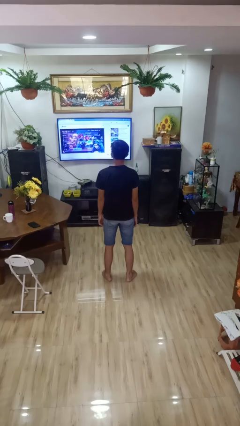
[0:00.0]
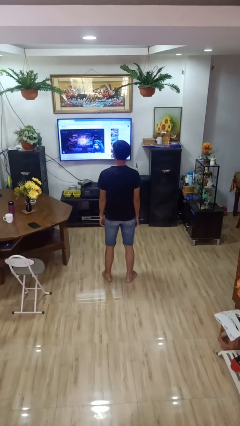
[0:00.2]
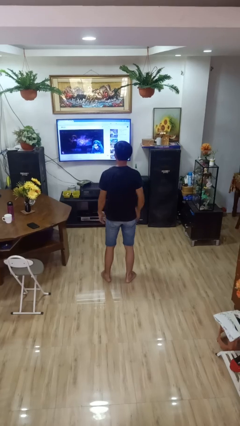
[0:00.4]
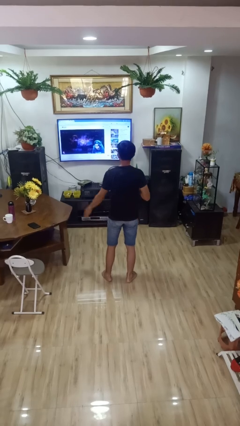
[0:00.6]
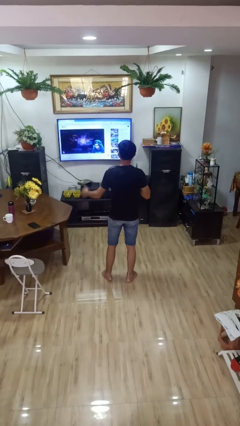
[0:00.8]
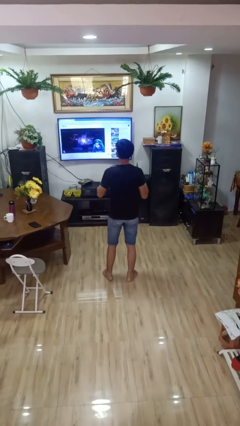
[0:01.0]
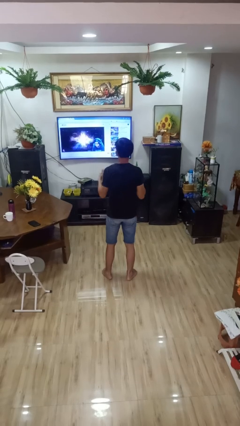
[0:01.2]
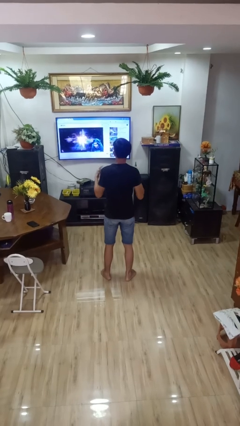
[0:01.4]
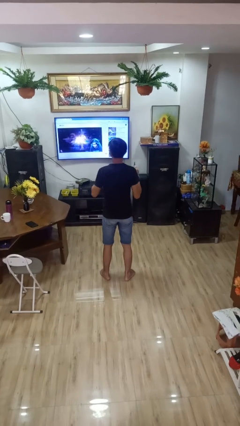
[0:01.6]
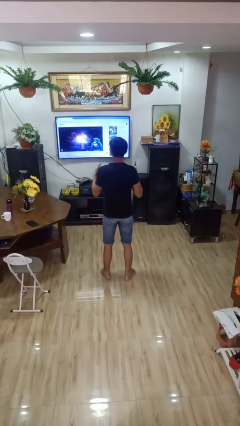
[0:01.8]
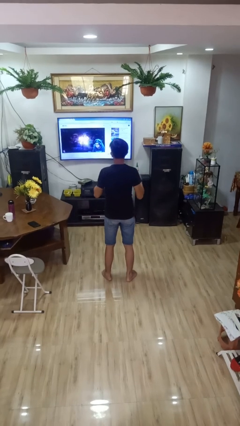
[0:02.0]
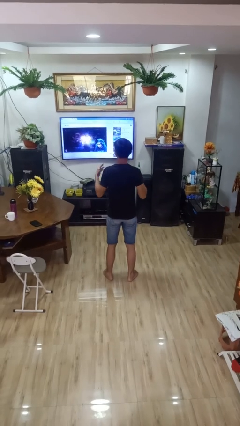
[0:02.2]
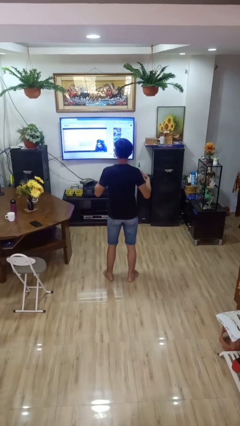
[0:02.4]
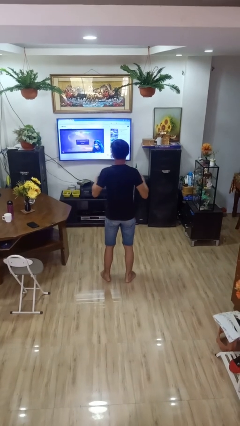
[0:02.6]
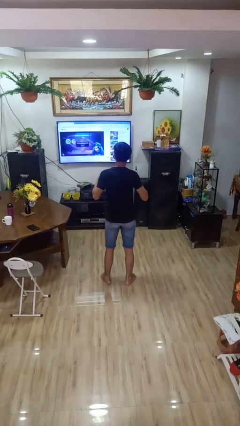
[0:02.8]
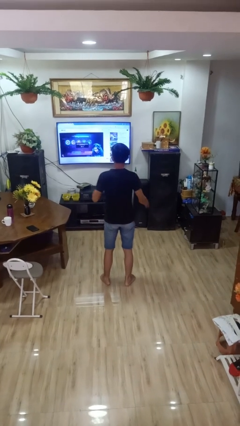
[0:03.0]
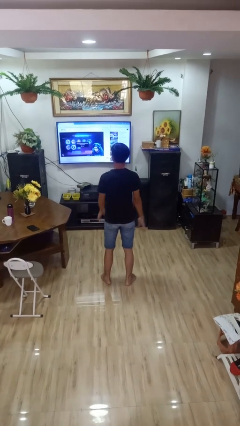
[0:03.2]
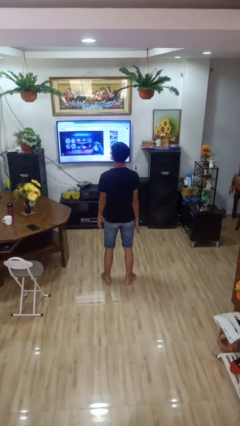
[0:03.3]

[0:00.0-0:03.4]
person drums on chest

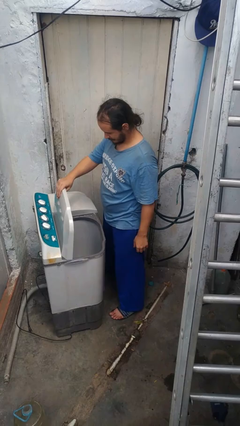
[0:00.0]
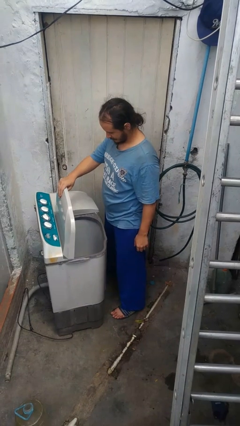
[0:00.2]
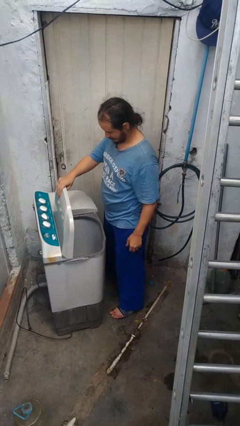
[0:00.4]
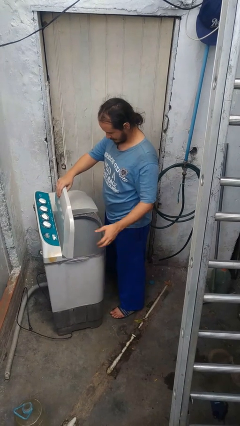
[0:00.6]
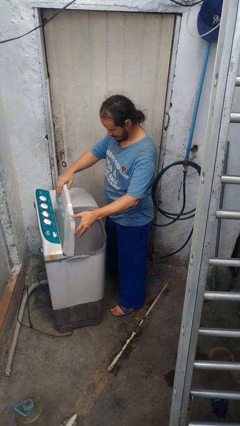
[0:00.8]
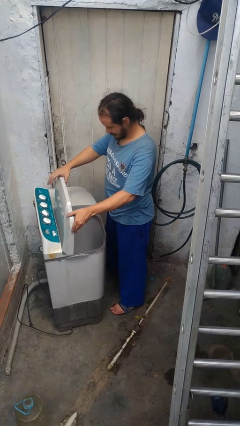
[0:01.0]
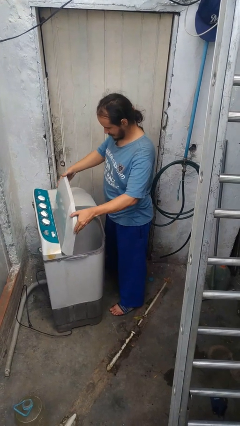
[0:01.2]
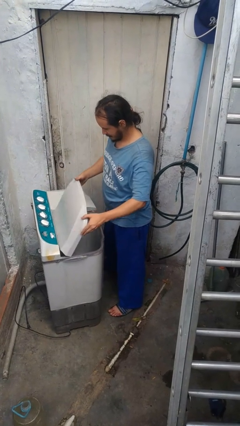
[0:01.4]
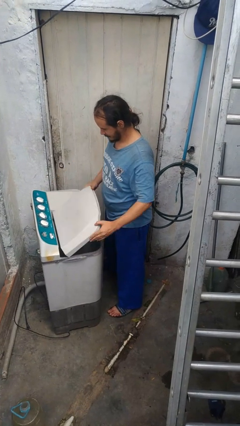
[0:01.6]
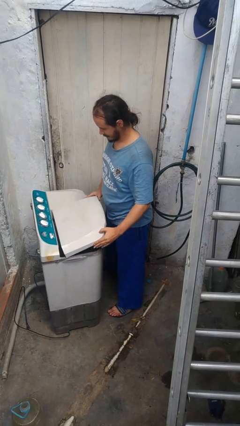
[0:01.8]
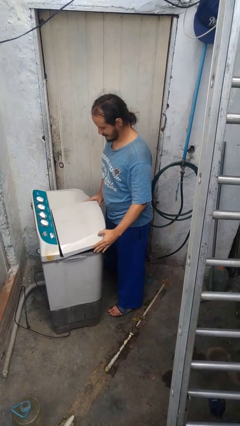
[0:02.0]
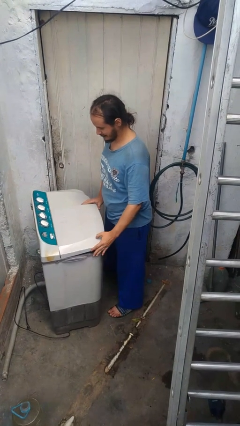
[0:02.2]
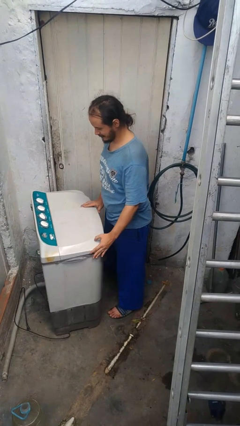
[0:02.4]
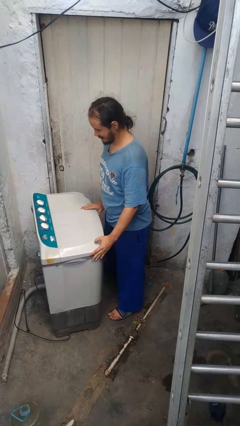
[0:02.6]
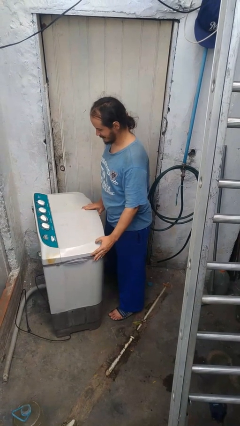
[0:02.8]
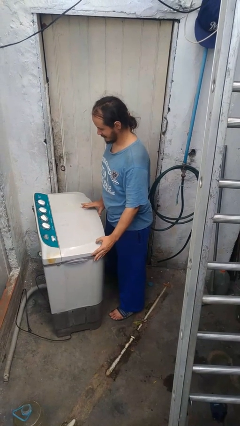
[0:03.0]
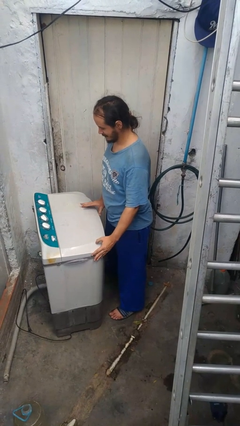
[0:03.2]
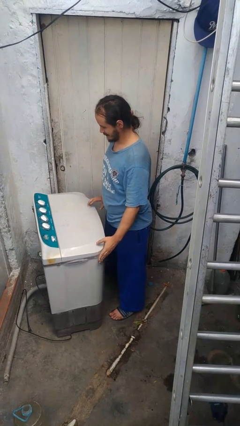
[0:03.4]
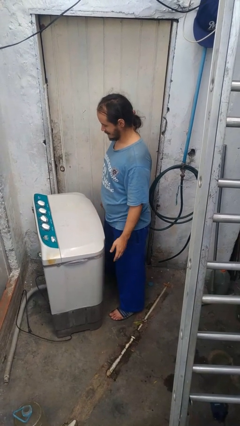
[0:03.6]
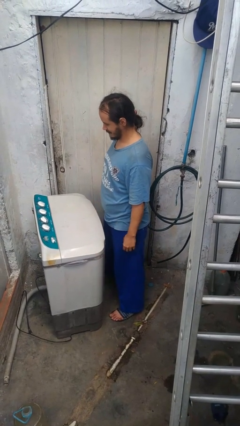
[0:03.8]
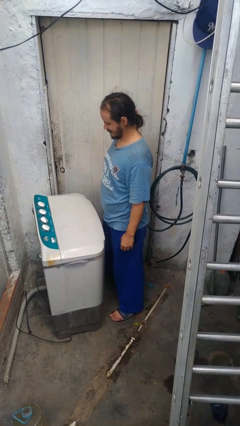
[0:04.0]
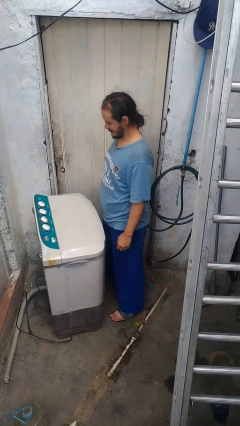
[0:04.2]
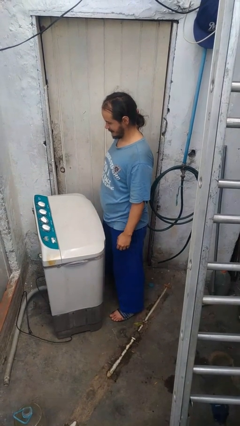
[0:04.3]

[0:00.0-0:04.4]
person closes clothes washer

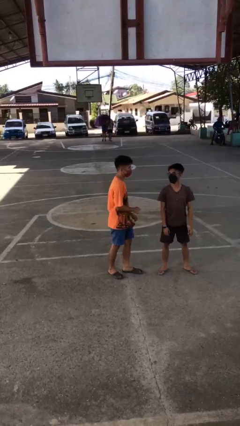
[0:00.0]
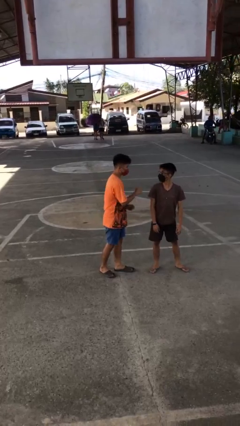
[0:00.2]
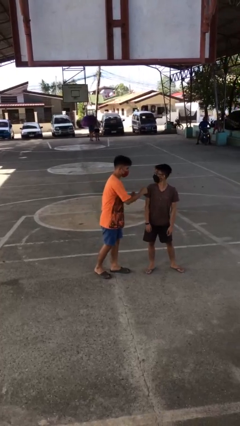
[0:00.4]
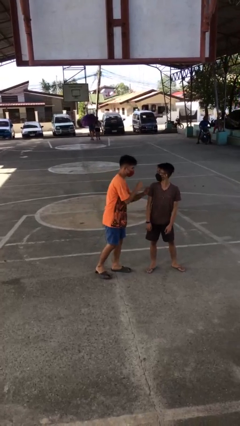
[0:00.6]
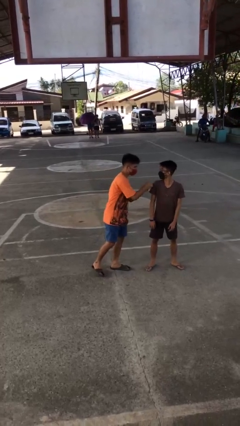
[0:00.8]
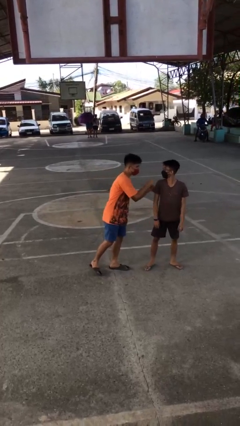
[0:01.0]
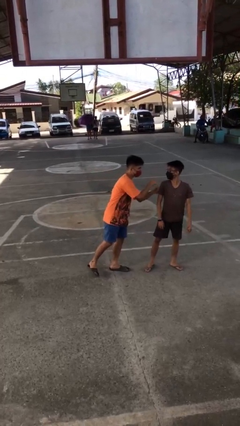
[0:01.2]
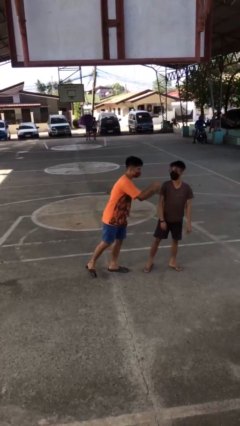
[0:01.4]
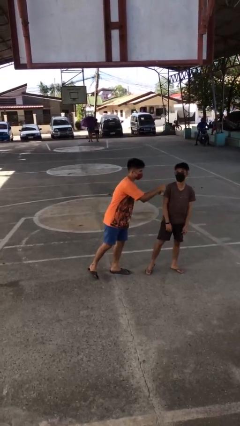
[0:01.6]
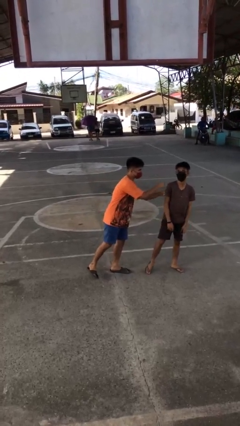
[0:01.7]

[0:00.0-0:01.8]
person pounds shoulders of person

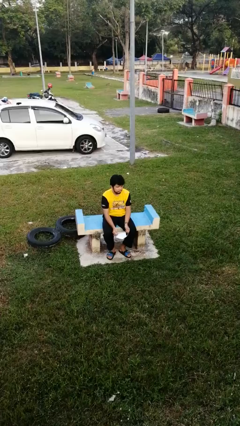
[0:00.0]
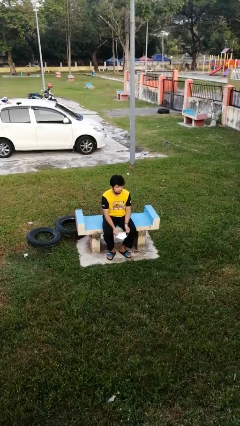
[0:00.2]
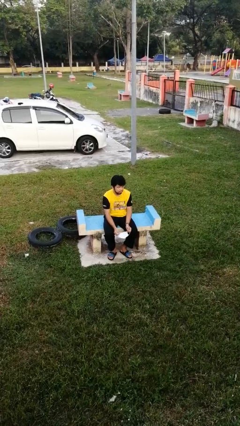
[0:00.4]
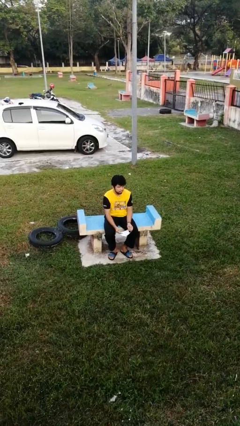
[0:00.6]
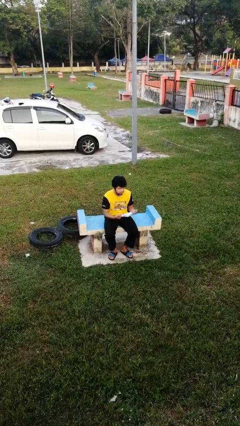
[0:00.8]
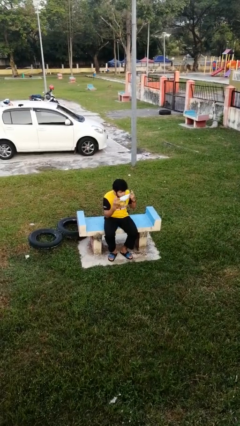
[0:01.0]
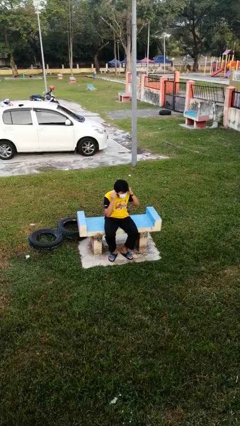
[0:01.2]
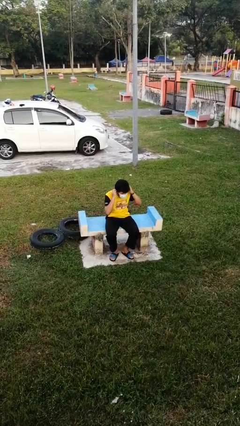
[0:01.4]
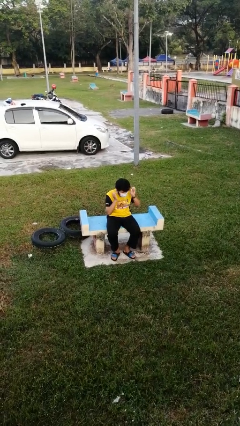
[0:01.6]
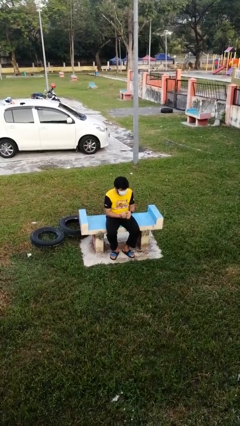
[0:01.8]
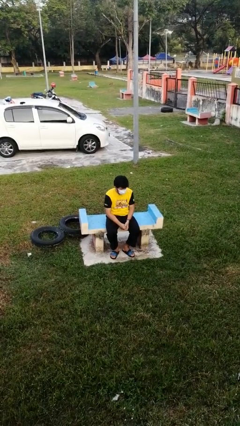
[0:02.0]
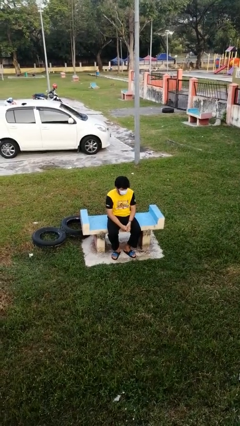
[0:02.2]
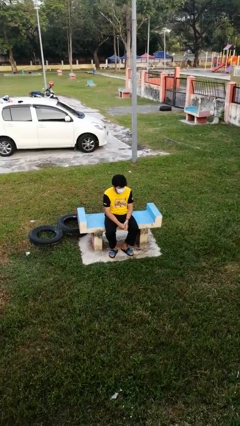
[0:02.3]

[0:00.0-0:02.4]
person puts on facemask

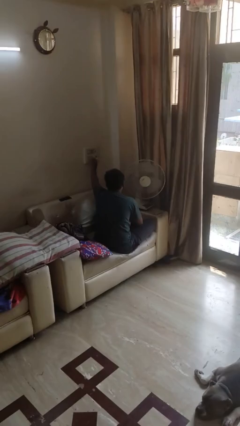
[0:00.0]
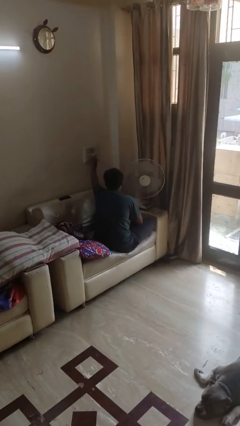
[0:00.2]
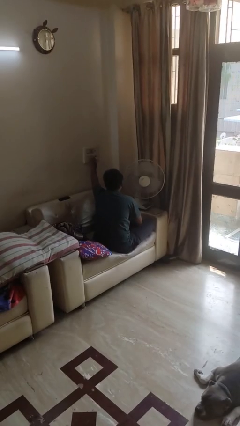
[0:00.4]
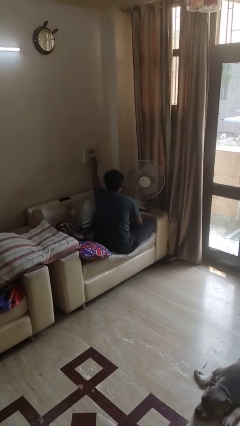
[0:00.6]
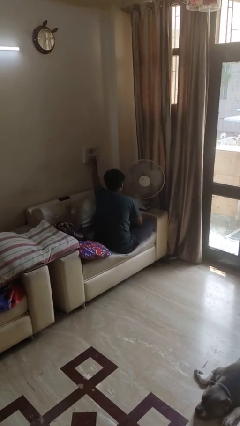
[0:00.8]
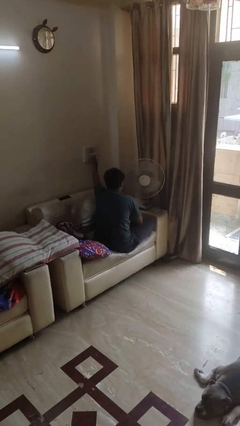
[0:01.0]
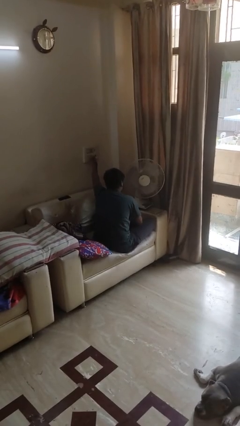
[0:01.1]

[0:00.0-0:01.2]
person turns on fan

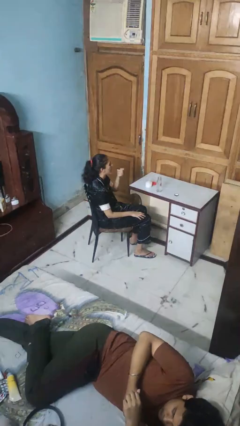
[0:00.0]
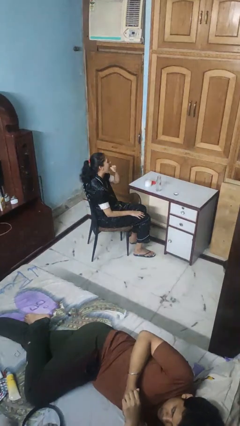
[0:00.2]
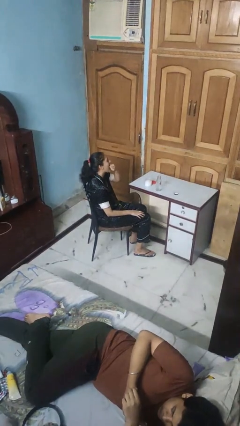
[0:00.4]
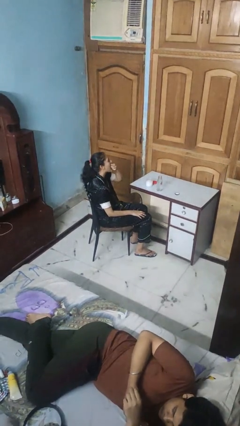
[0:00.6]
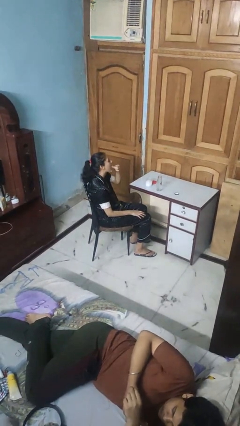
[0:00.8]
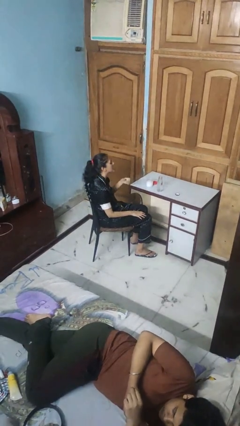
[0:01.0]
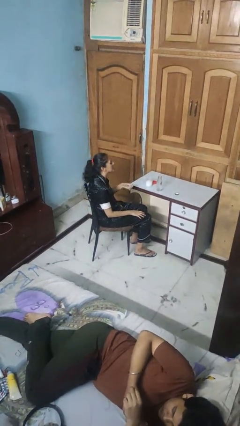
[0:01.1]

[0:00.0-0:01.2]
person takes medicine pills

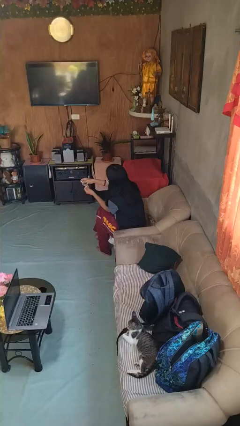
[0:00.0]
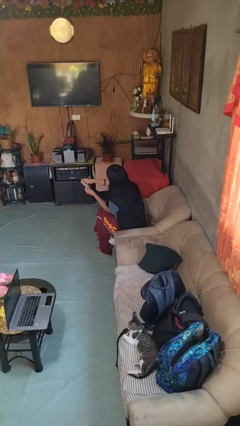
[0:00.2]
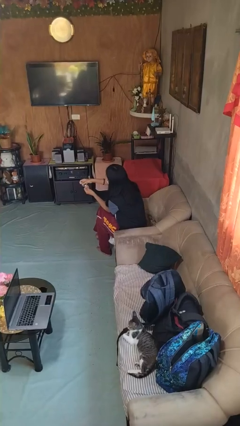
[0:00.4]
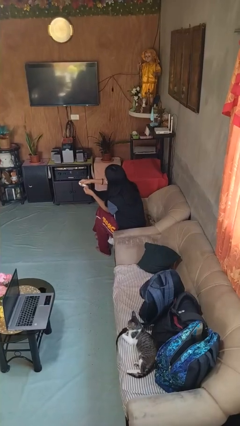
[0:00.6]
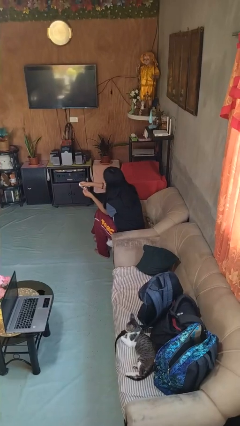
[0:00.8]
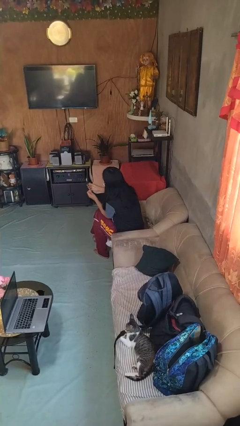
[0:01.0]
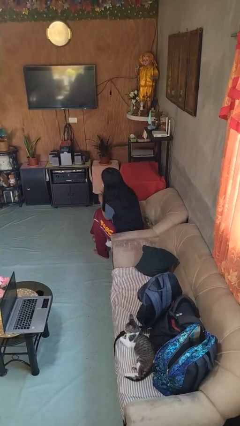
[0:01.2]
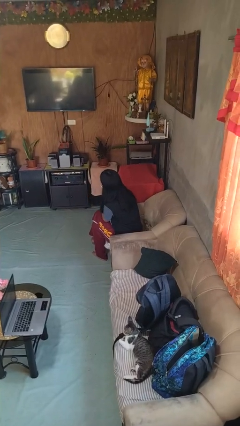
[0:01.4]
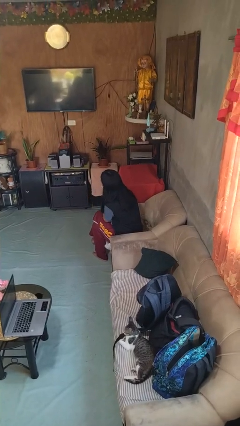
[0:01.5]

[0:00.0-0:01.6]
person clips fingernails

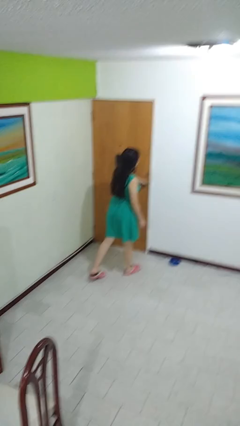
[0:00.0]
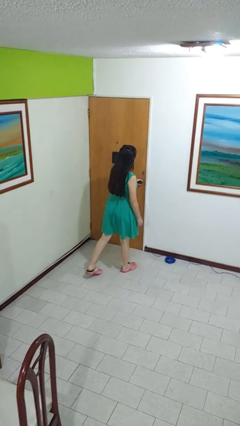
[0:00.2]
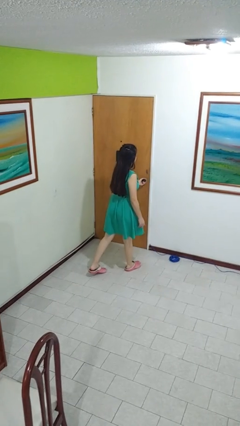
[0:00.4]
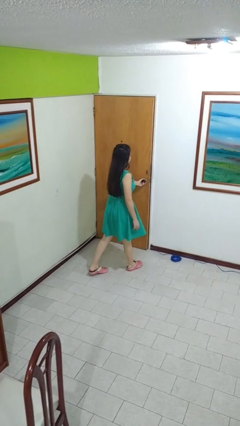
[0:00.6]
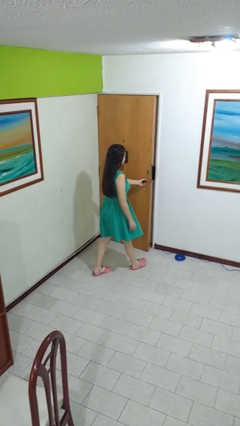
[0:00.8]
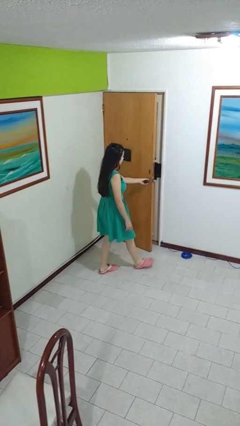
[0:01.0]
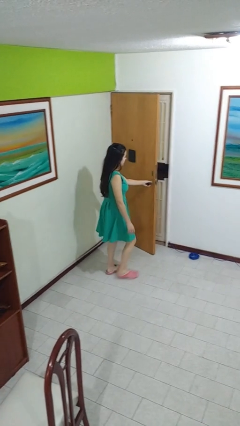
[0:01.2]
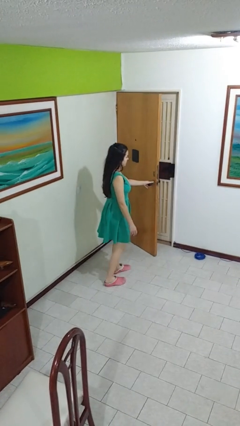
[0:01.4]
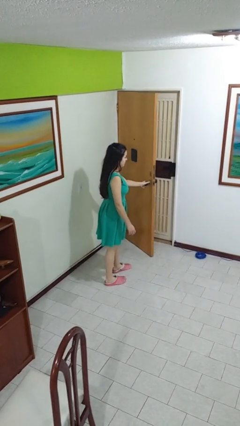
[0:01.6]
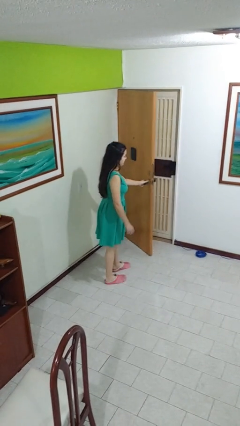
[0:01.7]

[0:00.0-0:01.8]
person opens facility door
